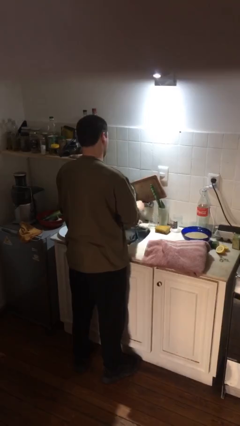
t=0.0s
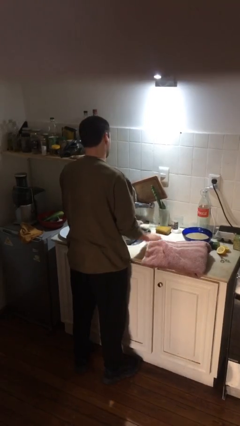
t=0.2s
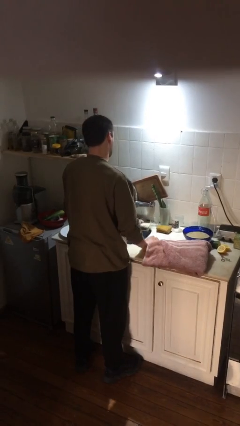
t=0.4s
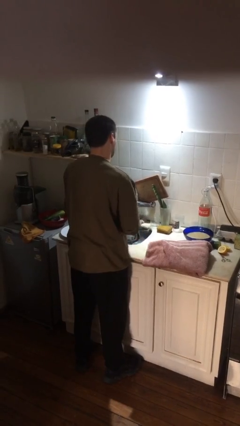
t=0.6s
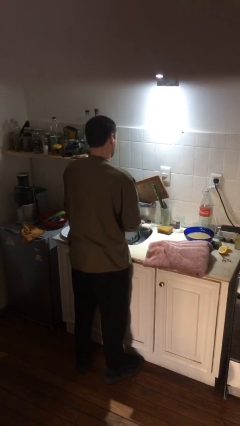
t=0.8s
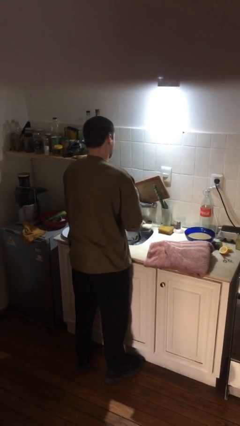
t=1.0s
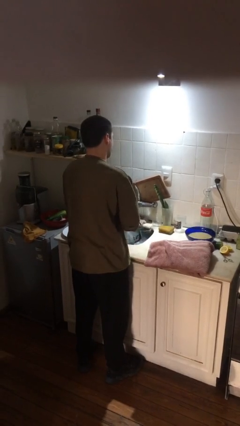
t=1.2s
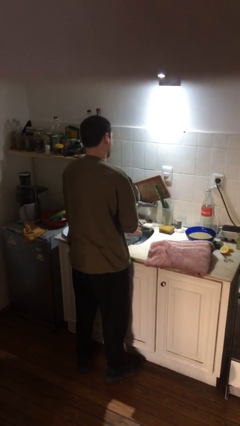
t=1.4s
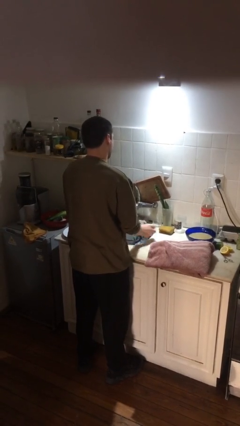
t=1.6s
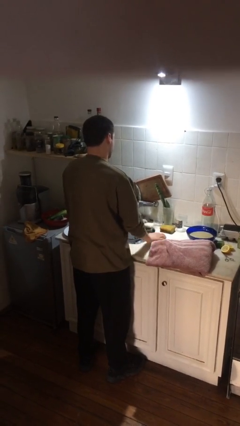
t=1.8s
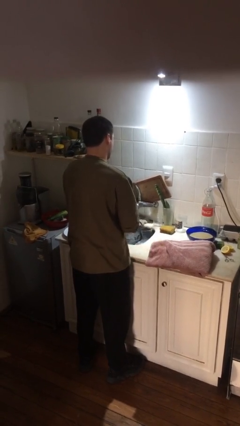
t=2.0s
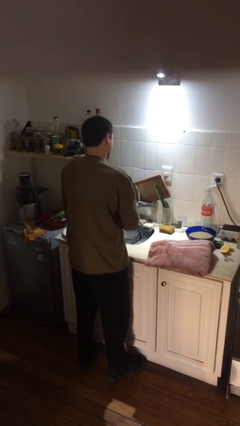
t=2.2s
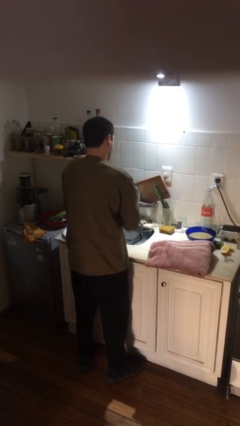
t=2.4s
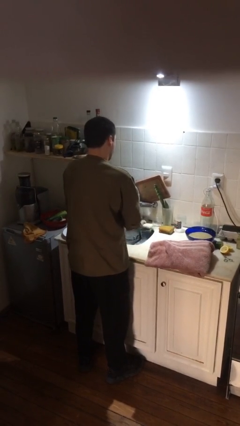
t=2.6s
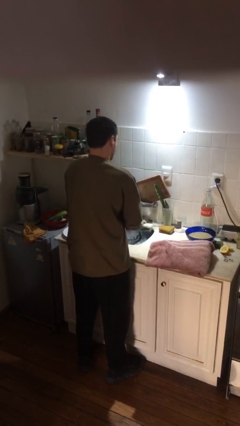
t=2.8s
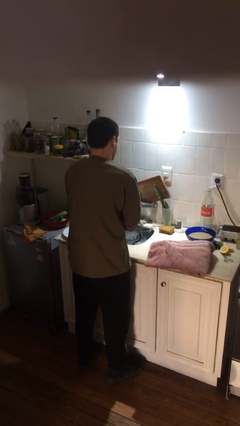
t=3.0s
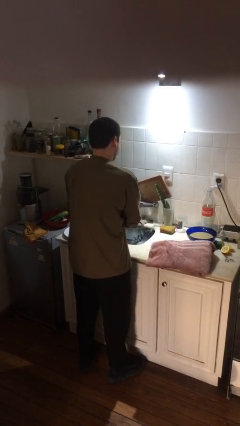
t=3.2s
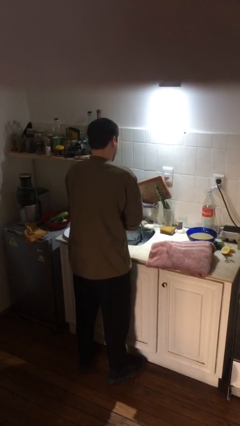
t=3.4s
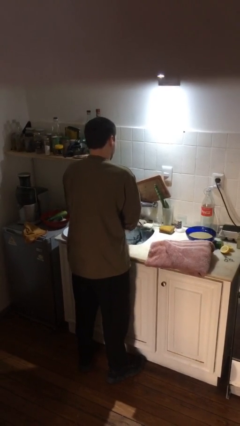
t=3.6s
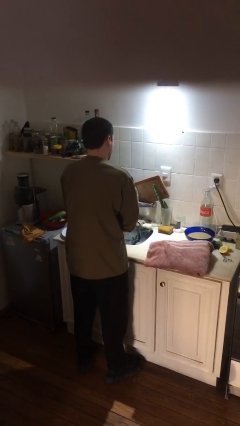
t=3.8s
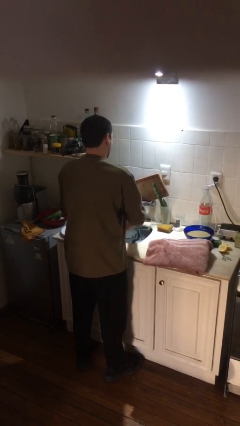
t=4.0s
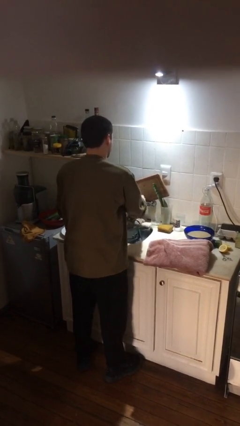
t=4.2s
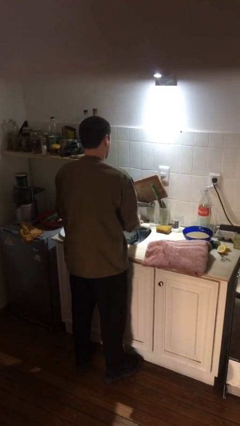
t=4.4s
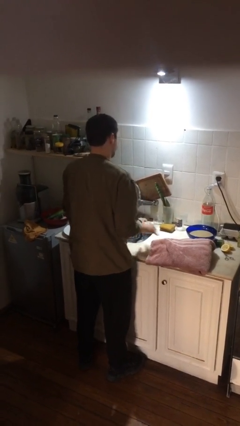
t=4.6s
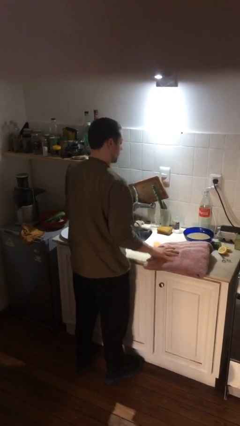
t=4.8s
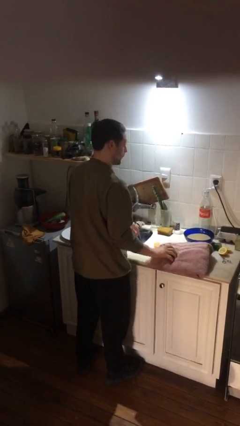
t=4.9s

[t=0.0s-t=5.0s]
person washes hands

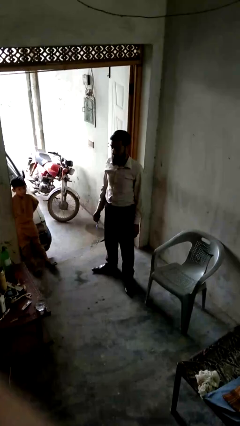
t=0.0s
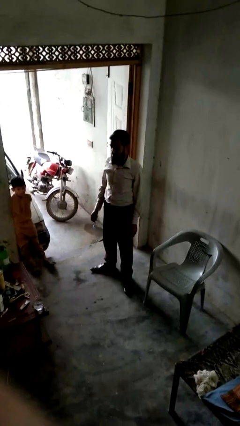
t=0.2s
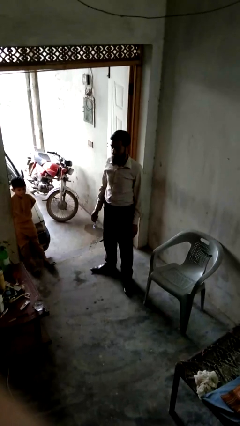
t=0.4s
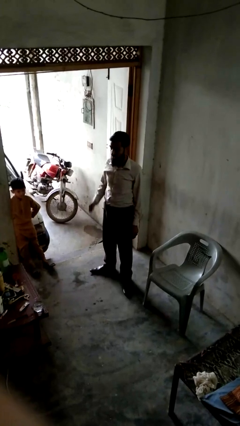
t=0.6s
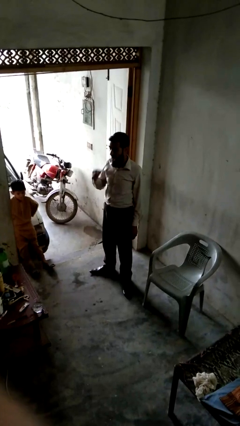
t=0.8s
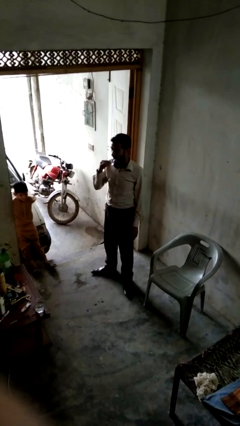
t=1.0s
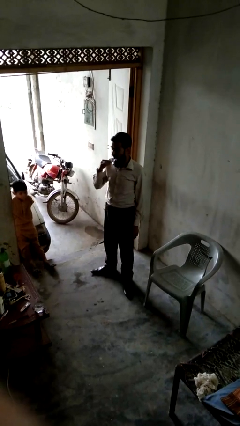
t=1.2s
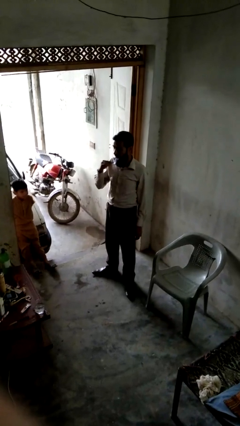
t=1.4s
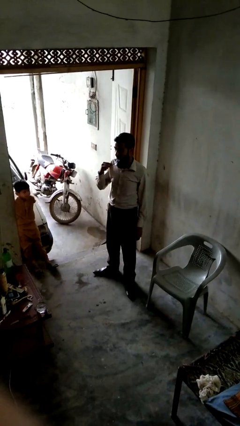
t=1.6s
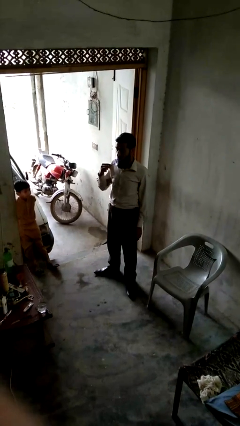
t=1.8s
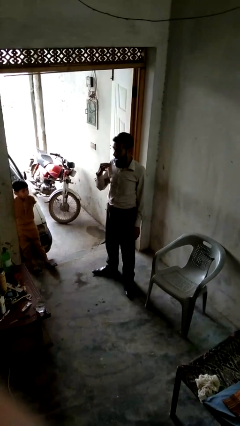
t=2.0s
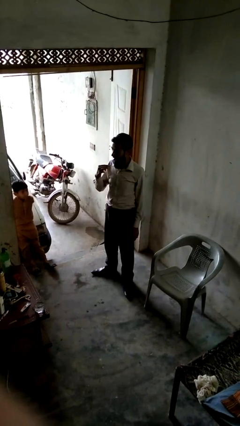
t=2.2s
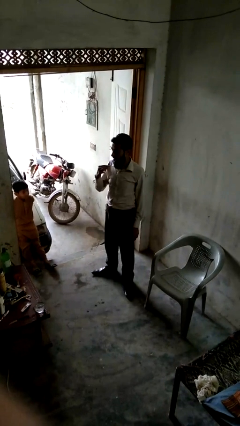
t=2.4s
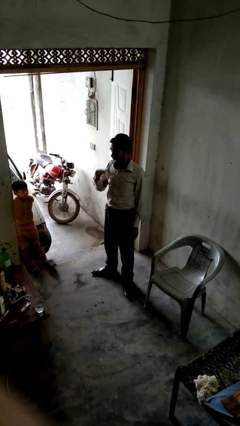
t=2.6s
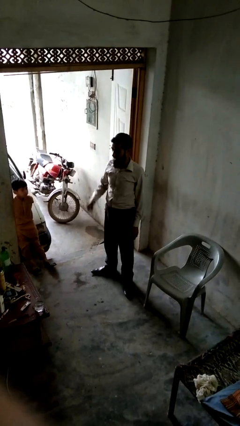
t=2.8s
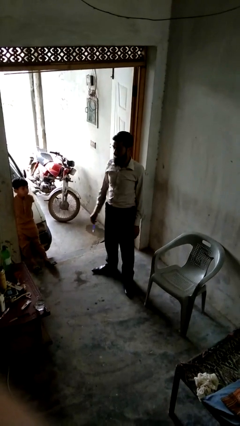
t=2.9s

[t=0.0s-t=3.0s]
person brushes teeth

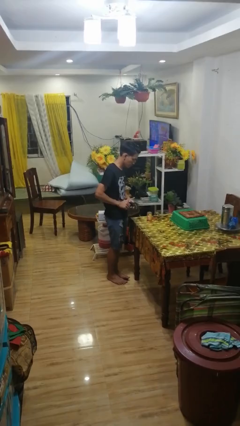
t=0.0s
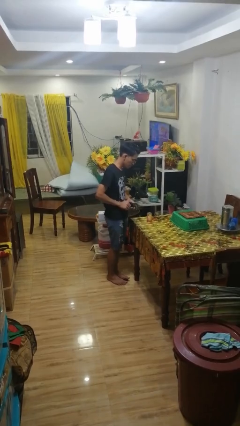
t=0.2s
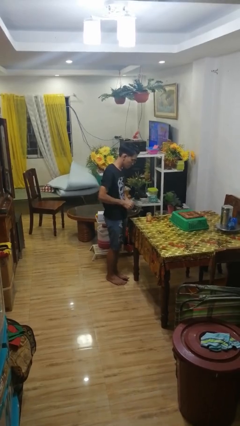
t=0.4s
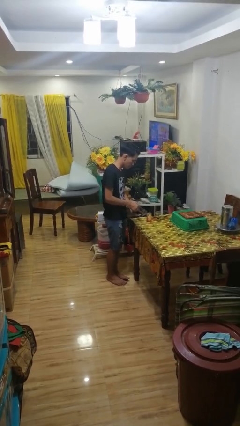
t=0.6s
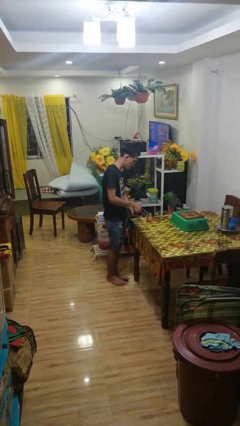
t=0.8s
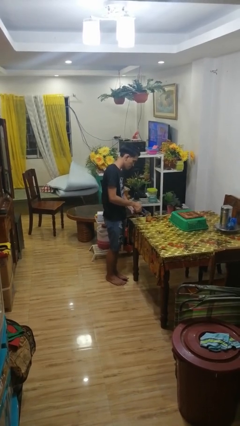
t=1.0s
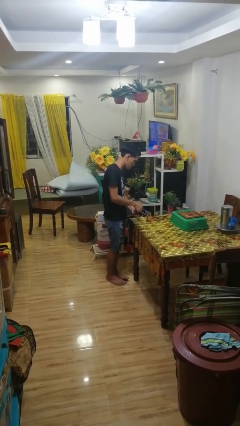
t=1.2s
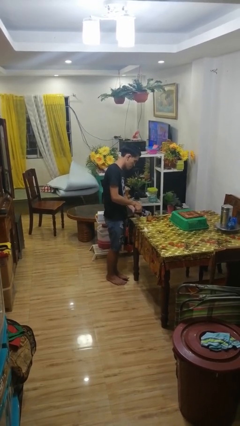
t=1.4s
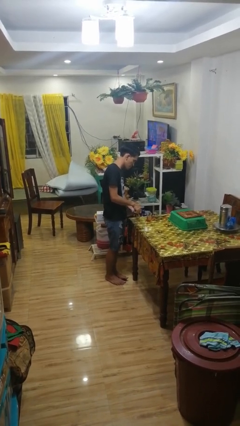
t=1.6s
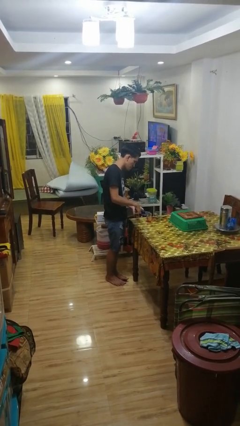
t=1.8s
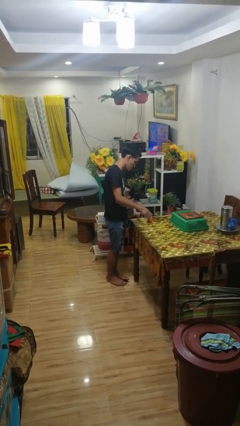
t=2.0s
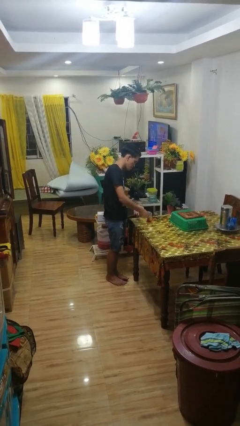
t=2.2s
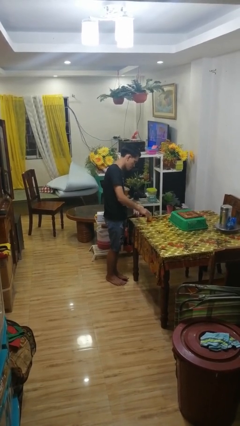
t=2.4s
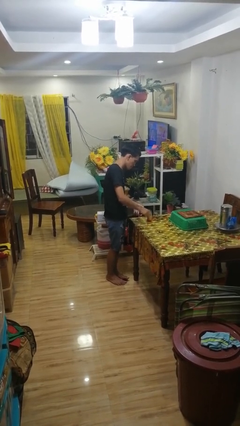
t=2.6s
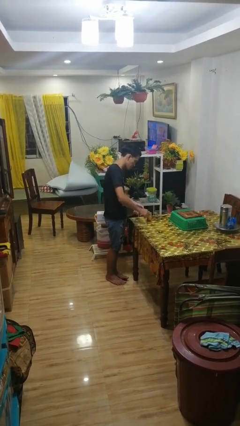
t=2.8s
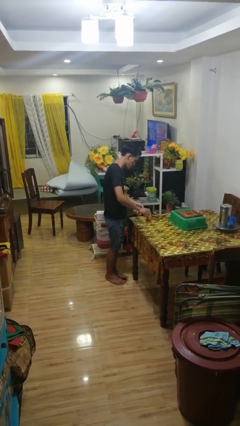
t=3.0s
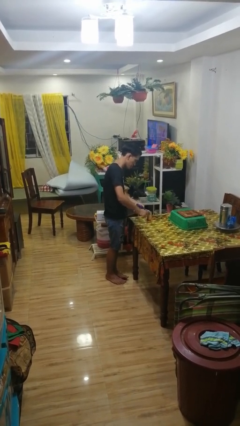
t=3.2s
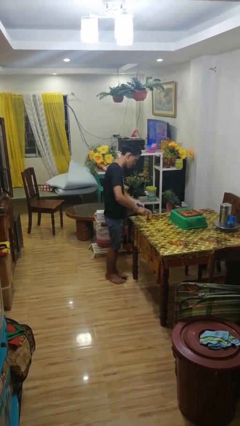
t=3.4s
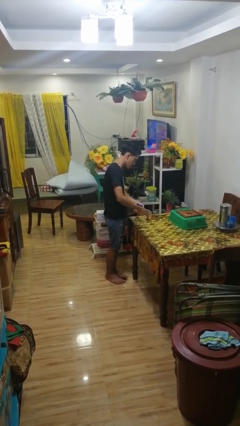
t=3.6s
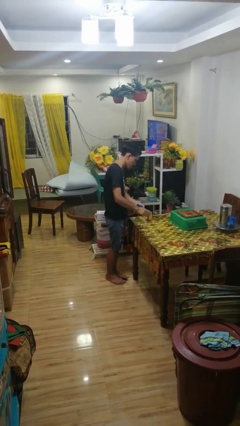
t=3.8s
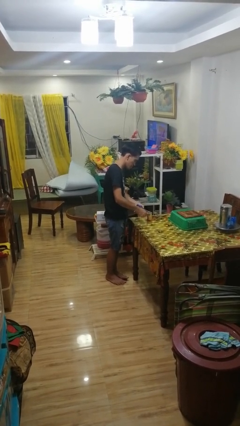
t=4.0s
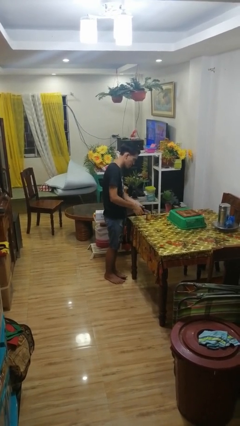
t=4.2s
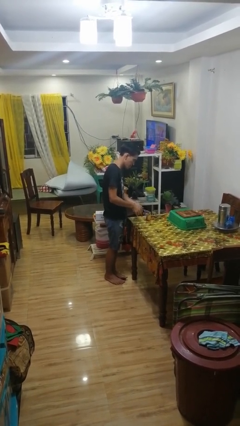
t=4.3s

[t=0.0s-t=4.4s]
person opens can with can opener

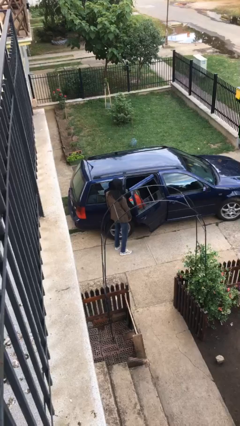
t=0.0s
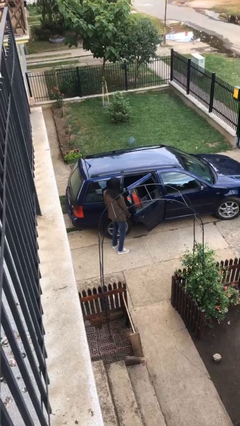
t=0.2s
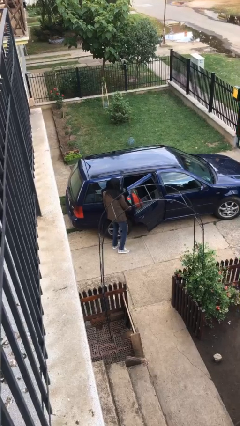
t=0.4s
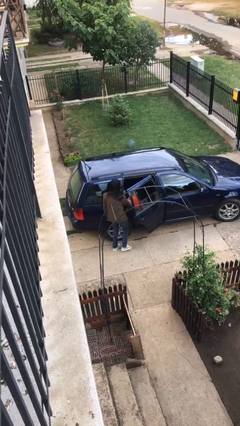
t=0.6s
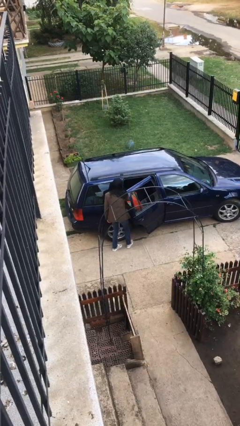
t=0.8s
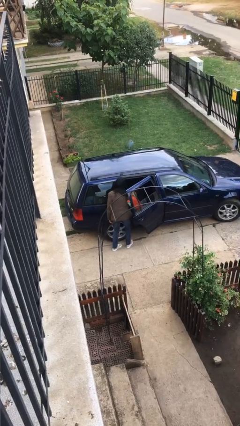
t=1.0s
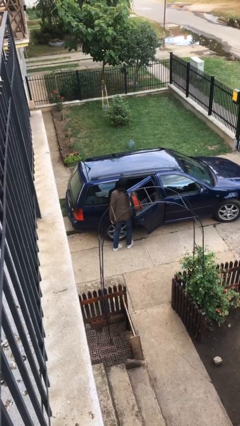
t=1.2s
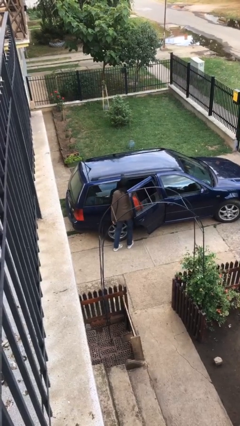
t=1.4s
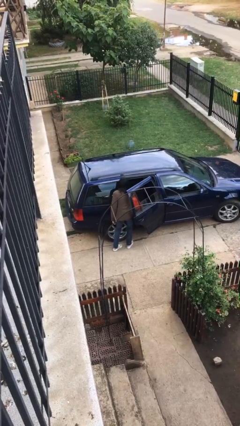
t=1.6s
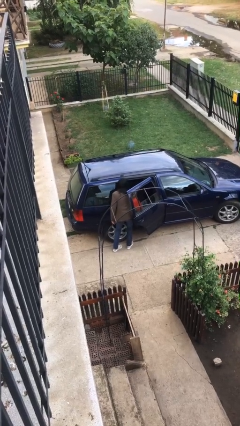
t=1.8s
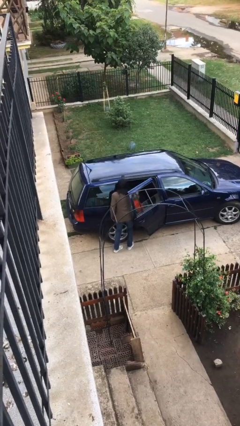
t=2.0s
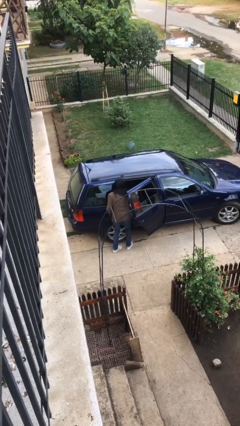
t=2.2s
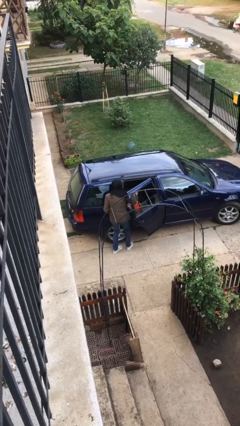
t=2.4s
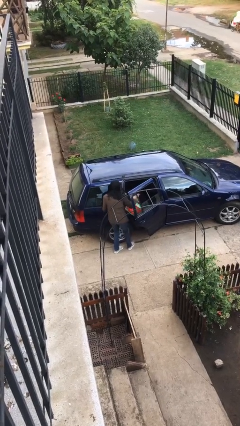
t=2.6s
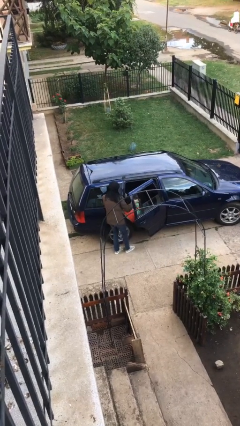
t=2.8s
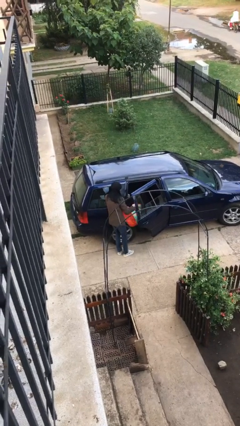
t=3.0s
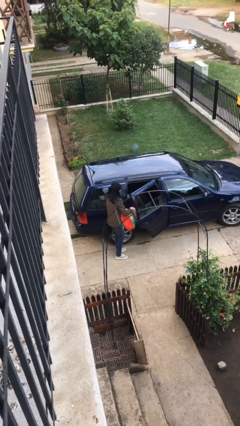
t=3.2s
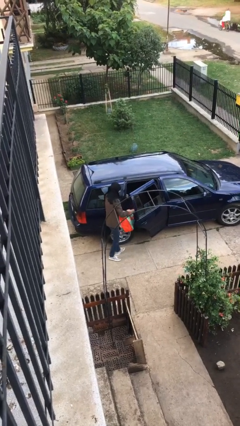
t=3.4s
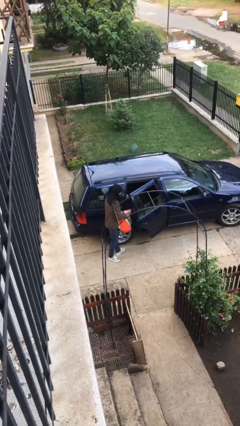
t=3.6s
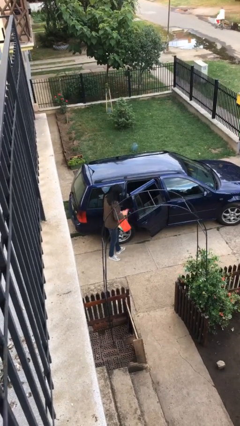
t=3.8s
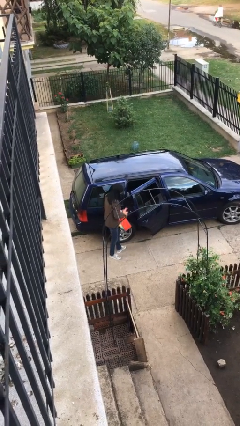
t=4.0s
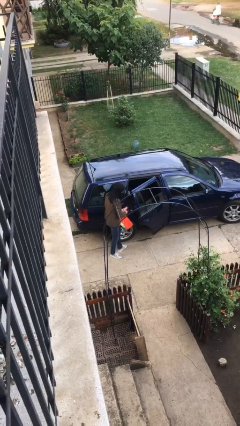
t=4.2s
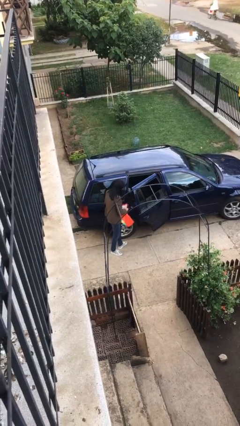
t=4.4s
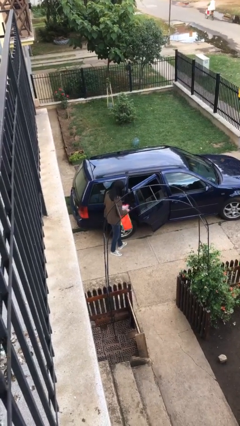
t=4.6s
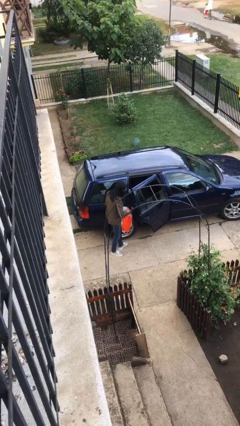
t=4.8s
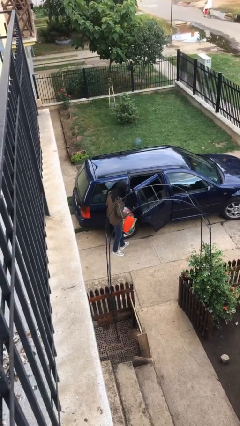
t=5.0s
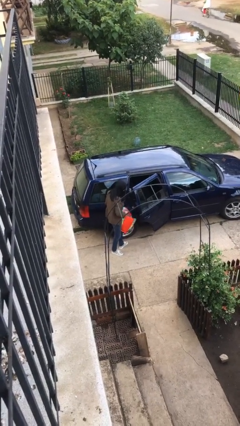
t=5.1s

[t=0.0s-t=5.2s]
person unloads car

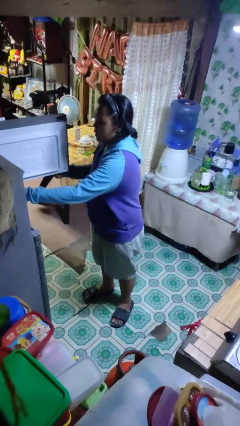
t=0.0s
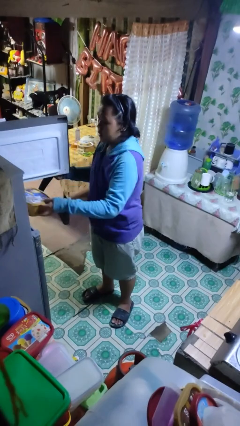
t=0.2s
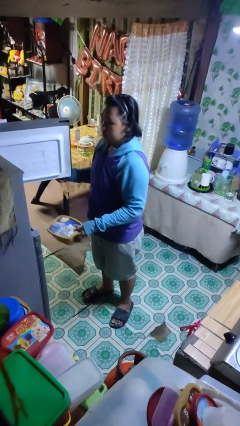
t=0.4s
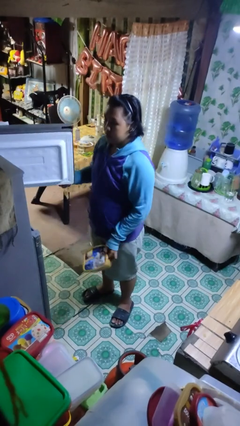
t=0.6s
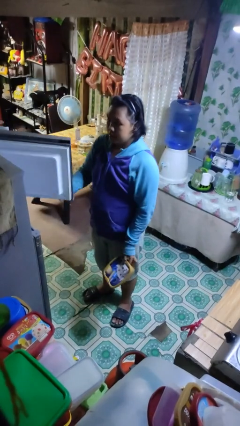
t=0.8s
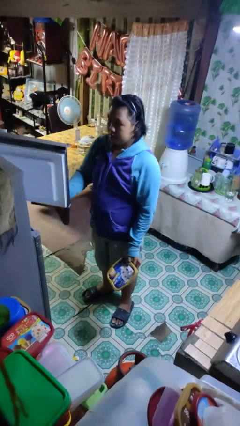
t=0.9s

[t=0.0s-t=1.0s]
person takes object from refrigerator
